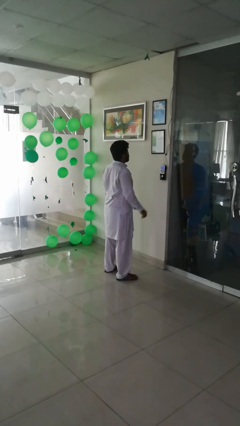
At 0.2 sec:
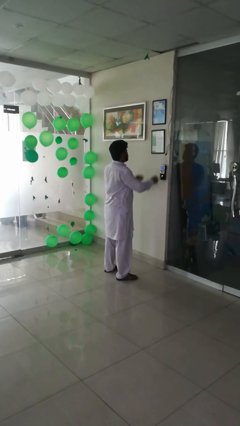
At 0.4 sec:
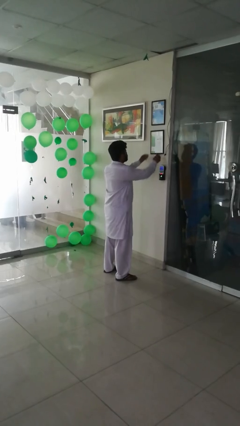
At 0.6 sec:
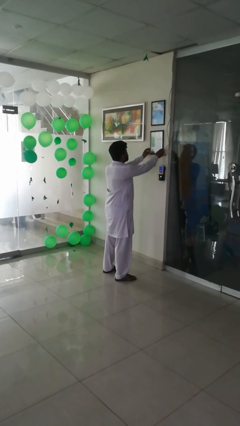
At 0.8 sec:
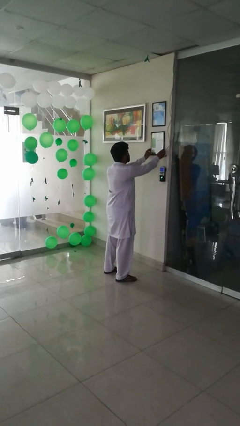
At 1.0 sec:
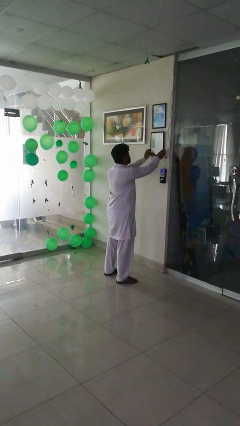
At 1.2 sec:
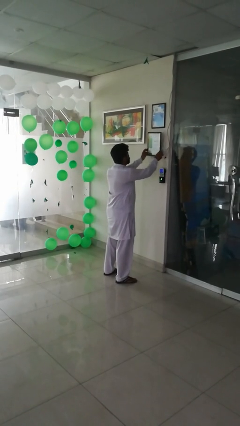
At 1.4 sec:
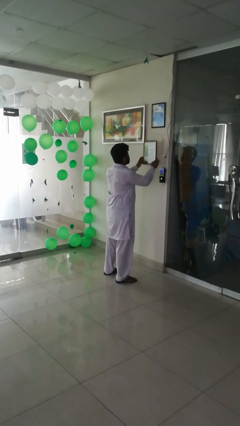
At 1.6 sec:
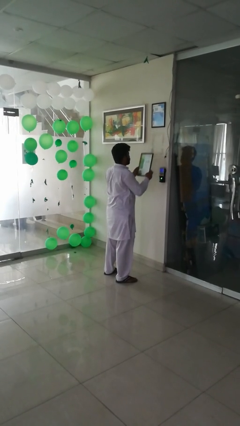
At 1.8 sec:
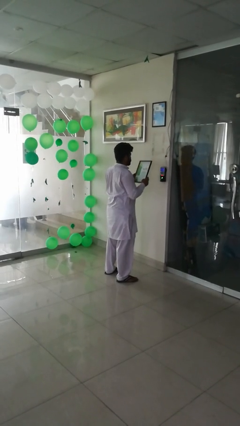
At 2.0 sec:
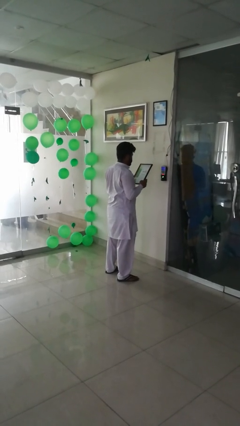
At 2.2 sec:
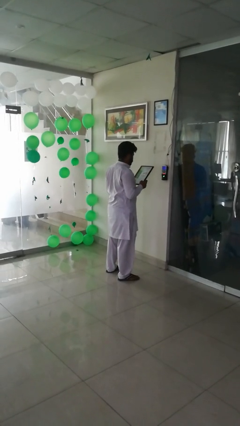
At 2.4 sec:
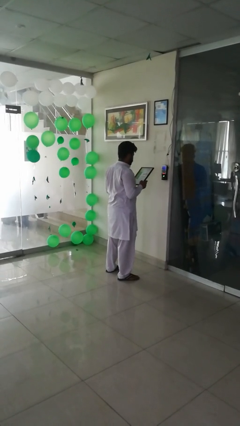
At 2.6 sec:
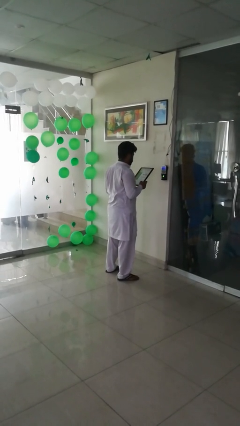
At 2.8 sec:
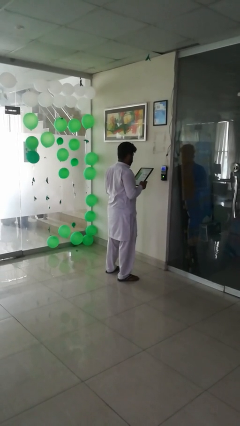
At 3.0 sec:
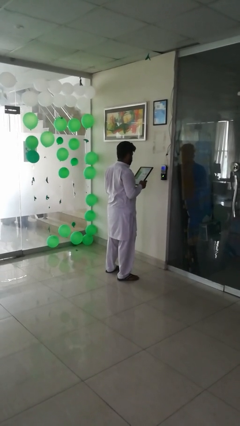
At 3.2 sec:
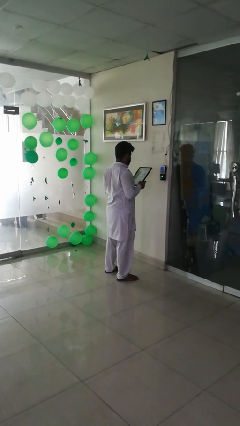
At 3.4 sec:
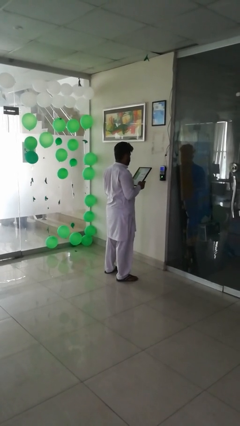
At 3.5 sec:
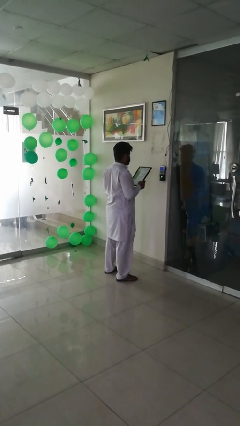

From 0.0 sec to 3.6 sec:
person takes down smoke detector

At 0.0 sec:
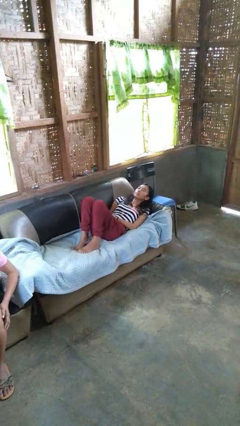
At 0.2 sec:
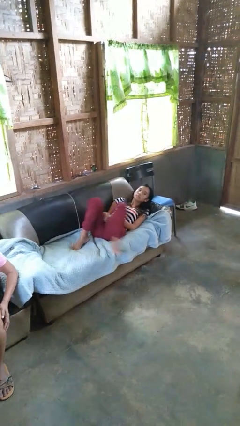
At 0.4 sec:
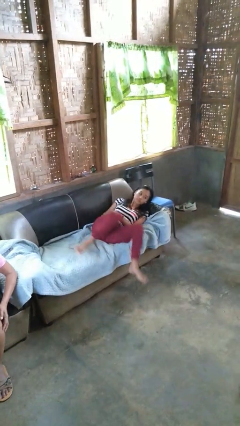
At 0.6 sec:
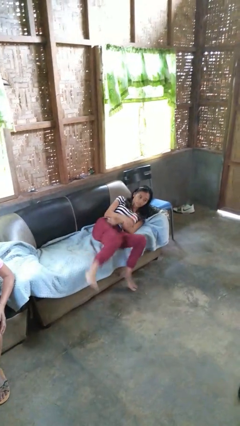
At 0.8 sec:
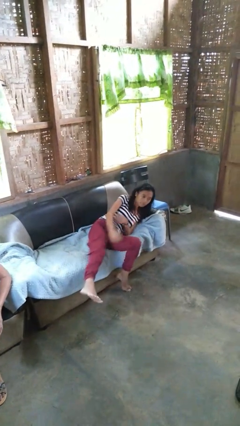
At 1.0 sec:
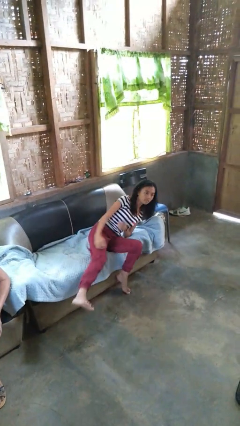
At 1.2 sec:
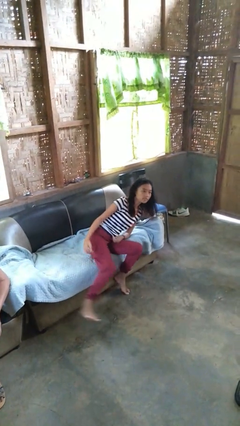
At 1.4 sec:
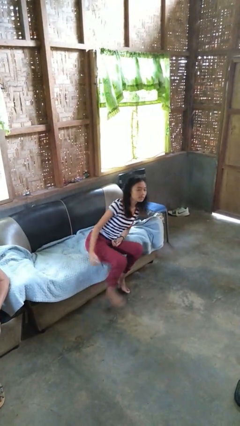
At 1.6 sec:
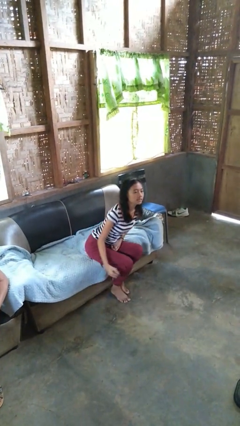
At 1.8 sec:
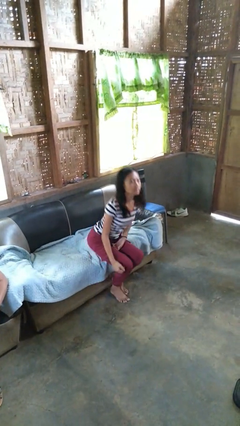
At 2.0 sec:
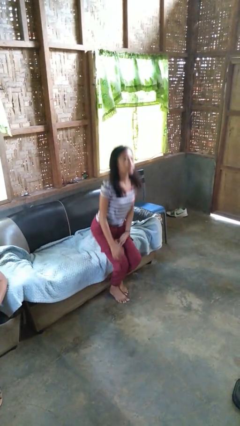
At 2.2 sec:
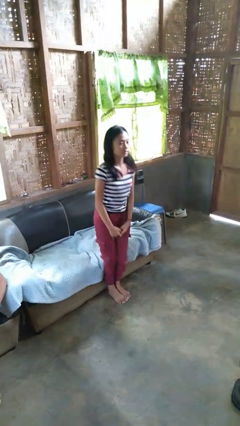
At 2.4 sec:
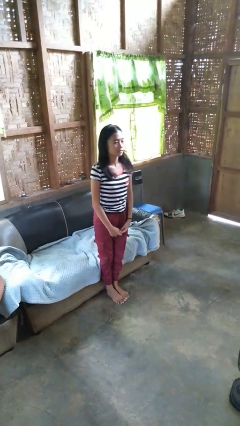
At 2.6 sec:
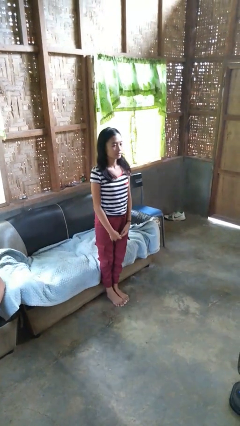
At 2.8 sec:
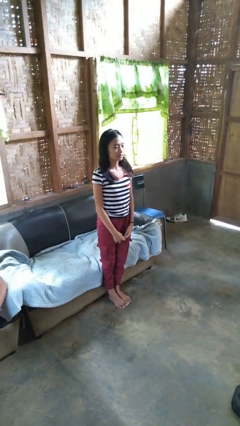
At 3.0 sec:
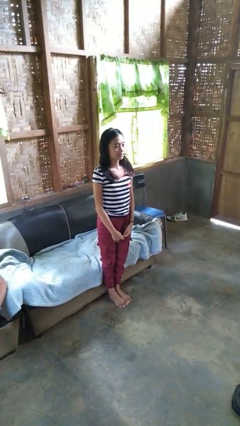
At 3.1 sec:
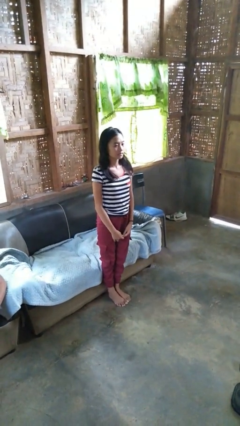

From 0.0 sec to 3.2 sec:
person stands up

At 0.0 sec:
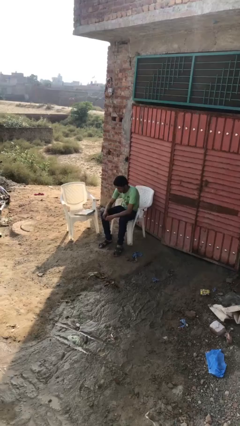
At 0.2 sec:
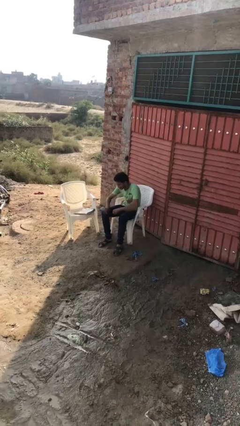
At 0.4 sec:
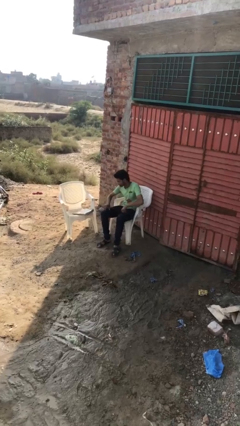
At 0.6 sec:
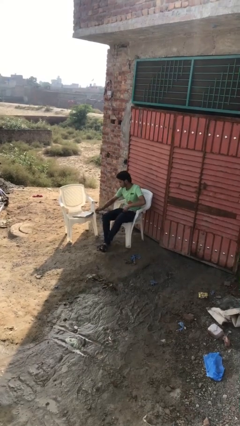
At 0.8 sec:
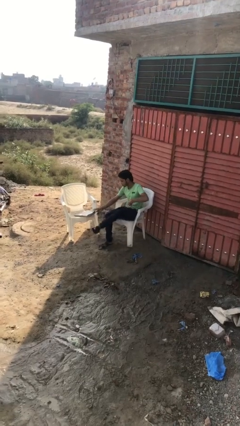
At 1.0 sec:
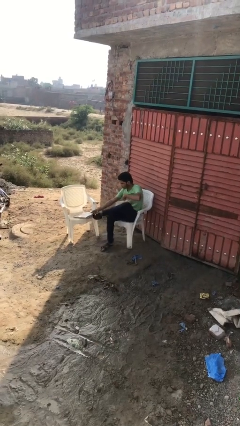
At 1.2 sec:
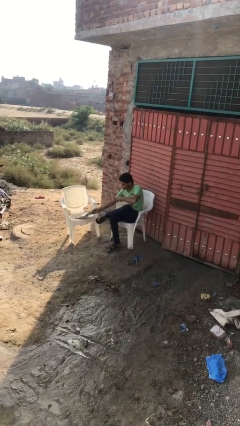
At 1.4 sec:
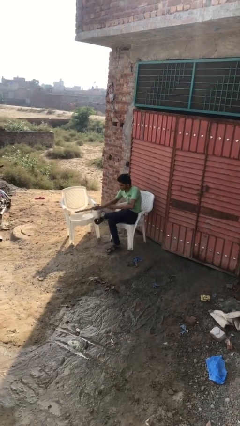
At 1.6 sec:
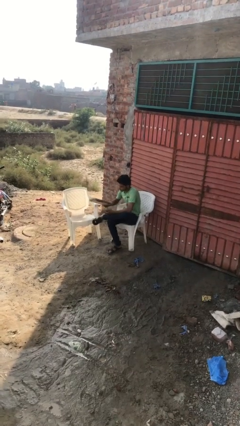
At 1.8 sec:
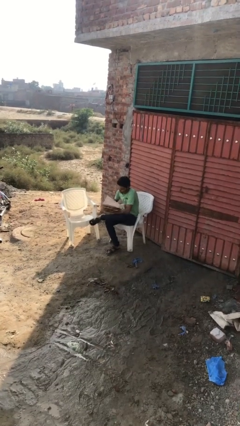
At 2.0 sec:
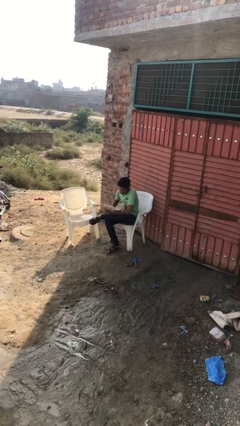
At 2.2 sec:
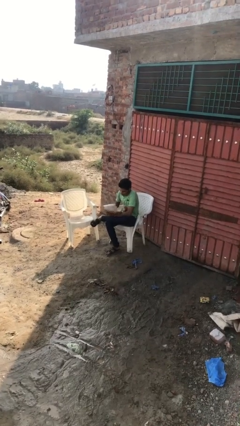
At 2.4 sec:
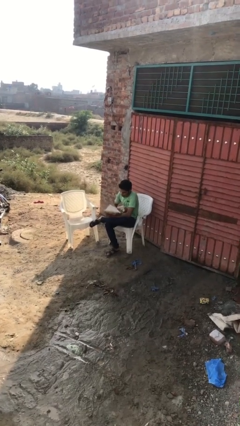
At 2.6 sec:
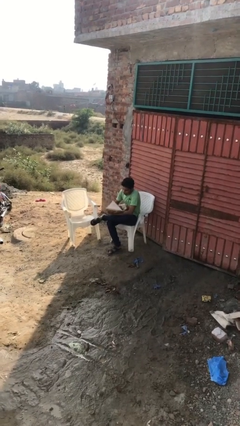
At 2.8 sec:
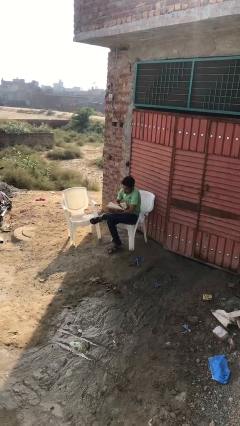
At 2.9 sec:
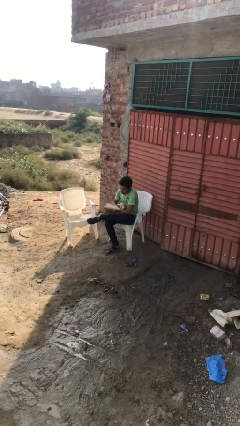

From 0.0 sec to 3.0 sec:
person picks up object from table

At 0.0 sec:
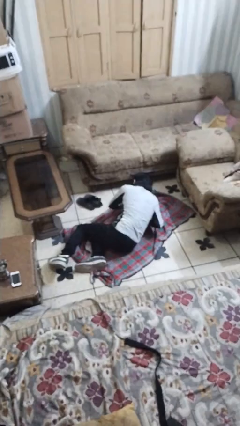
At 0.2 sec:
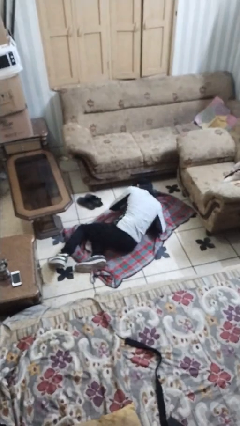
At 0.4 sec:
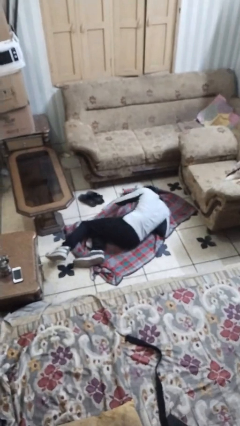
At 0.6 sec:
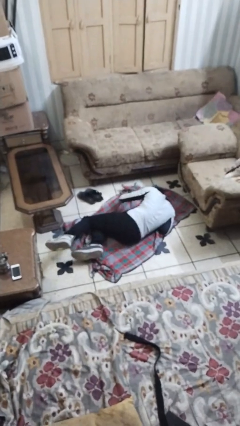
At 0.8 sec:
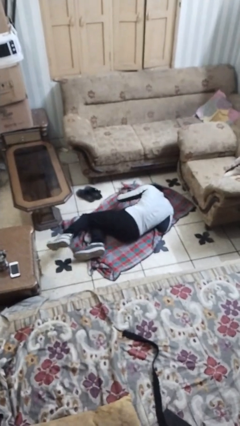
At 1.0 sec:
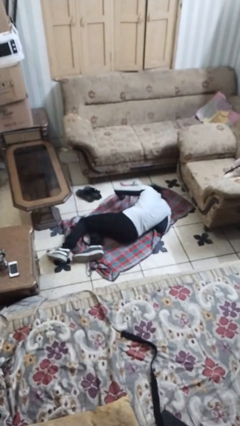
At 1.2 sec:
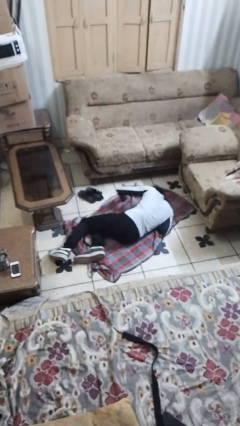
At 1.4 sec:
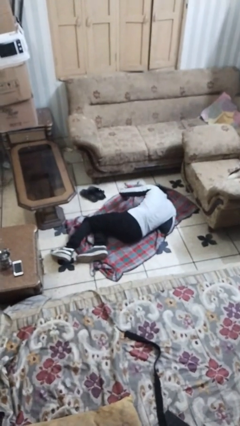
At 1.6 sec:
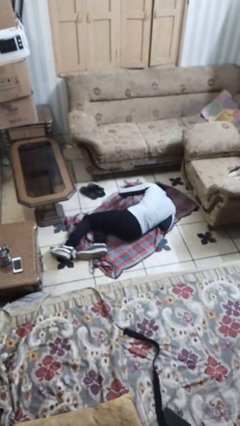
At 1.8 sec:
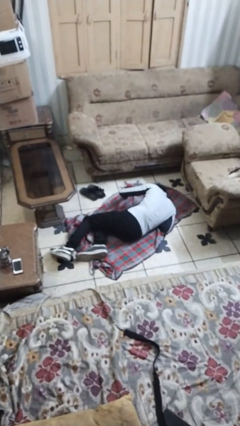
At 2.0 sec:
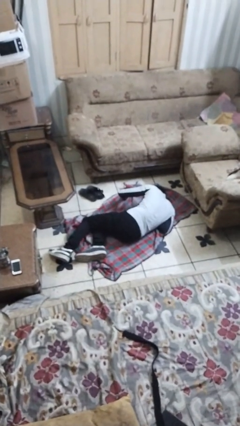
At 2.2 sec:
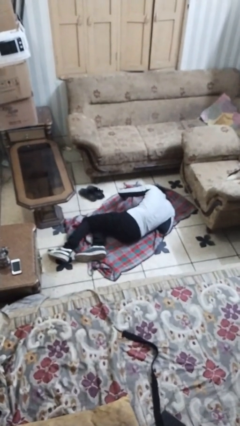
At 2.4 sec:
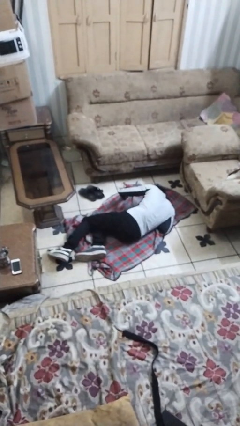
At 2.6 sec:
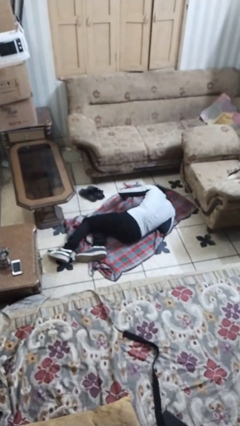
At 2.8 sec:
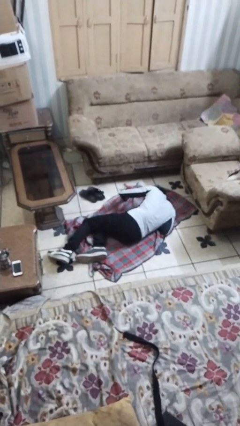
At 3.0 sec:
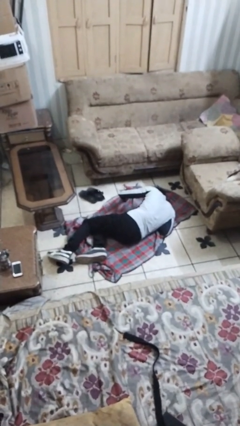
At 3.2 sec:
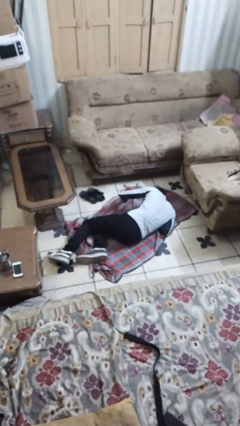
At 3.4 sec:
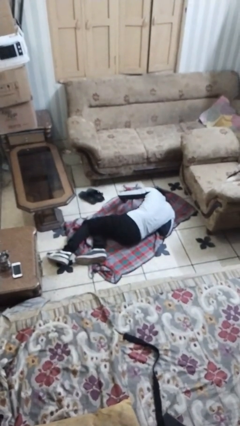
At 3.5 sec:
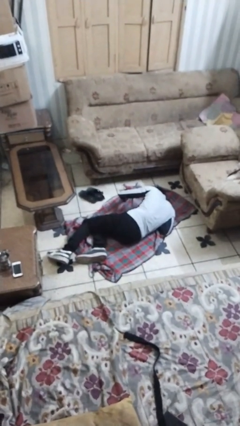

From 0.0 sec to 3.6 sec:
person lies down on floor

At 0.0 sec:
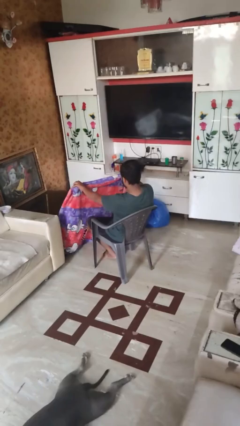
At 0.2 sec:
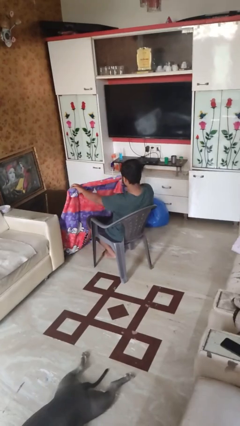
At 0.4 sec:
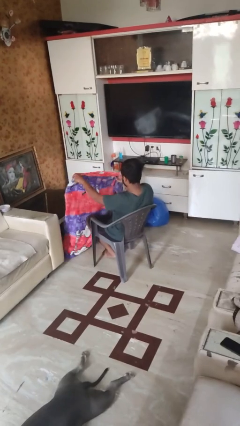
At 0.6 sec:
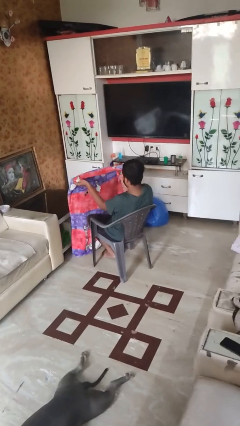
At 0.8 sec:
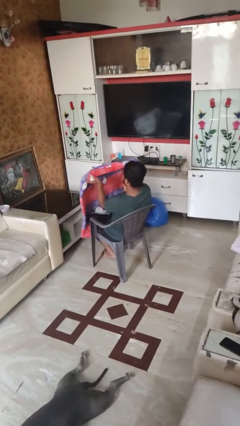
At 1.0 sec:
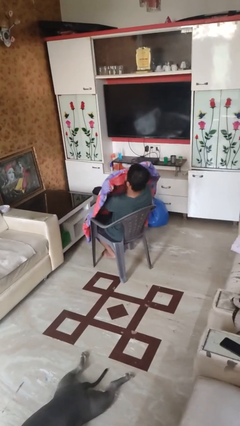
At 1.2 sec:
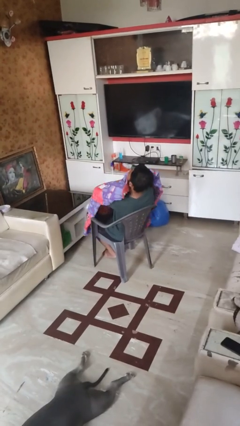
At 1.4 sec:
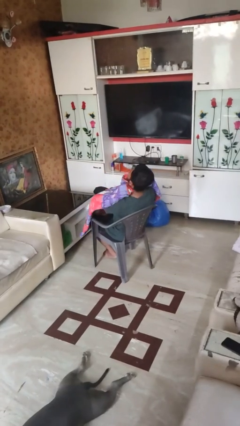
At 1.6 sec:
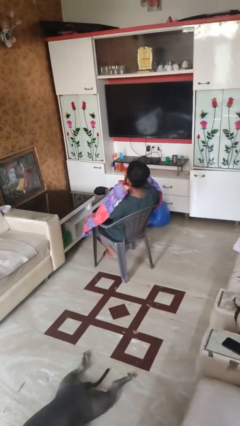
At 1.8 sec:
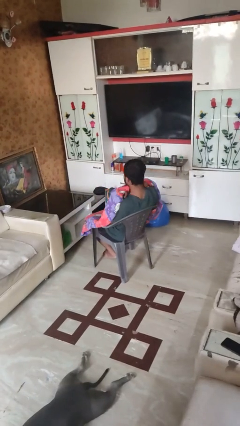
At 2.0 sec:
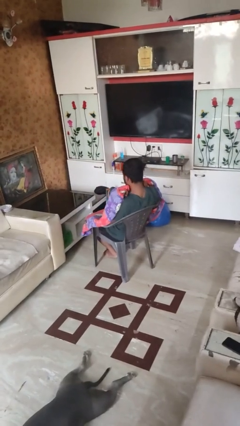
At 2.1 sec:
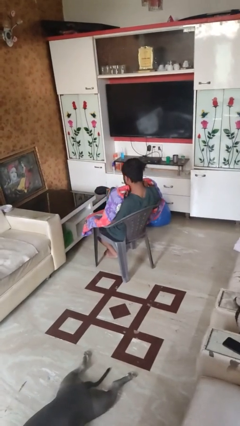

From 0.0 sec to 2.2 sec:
person covers with blanket

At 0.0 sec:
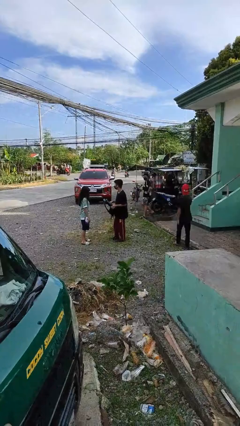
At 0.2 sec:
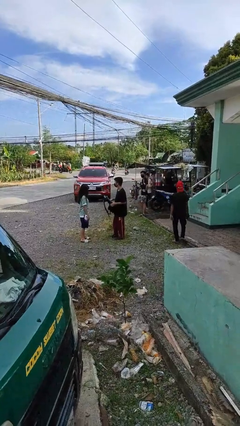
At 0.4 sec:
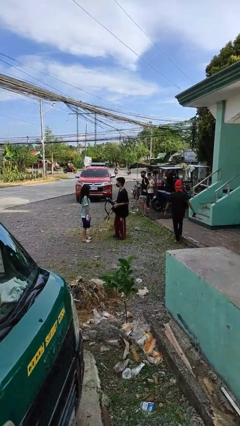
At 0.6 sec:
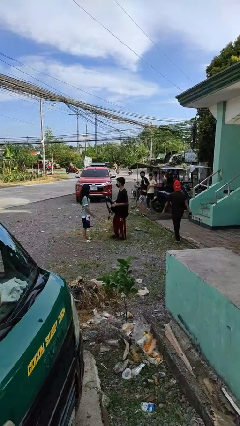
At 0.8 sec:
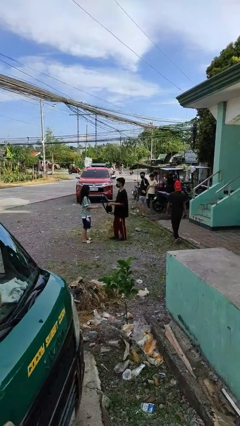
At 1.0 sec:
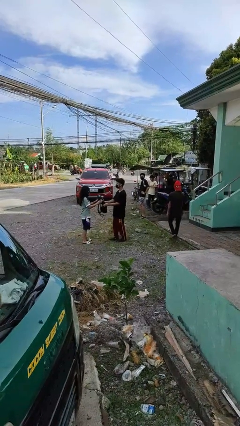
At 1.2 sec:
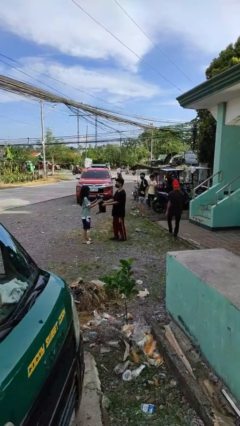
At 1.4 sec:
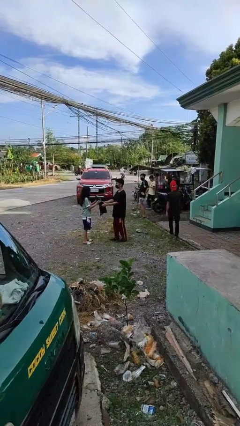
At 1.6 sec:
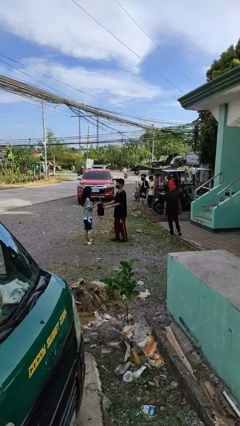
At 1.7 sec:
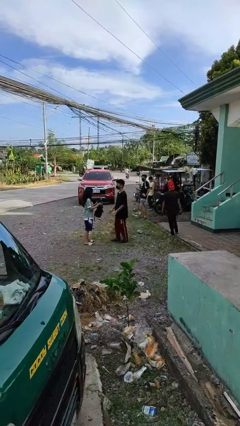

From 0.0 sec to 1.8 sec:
person transfers object to person
